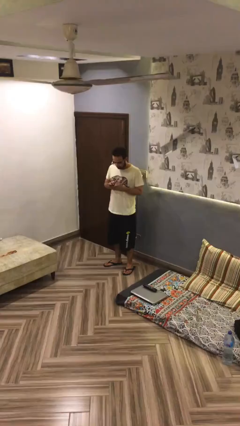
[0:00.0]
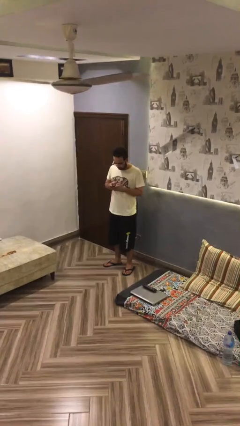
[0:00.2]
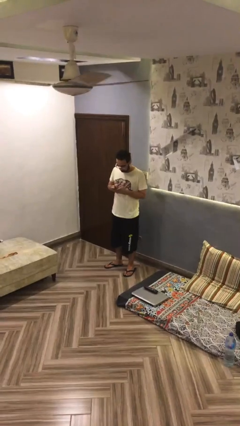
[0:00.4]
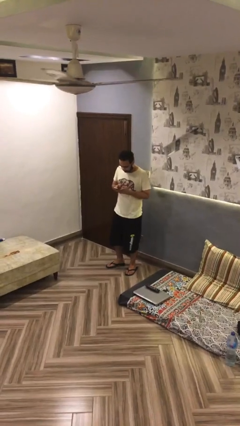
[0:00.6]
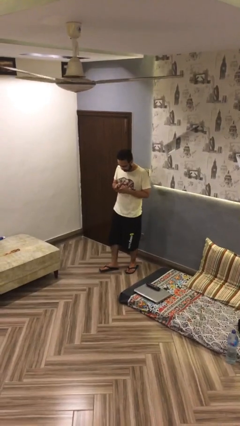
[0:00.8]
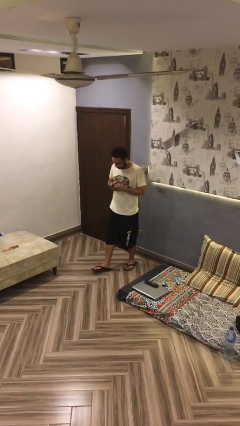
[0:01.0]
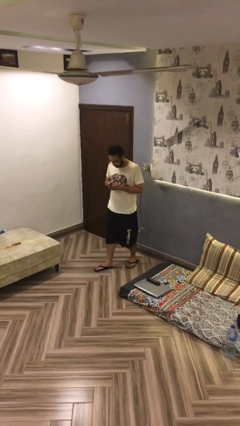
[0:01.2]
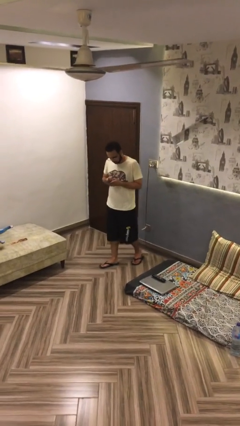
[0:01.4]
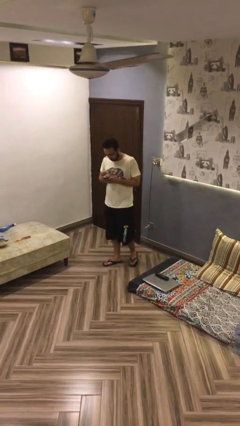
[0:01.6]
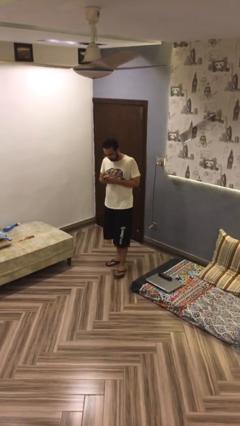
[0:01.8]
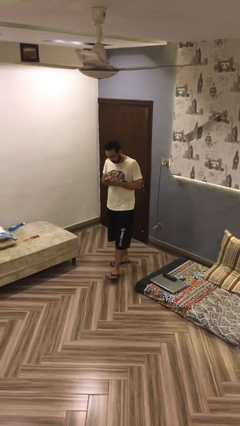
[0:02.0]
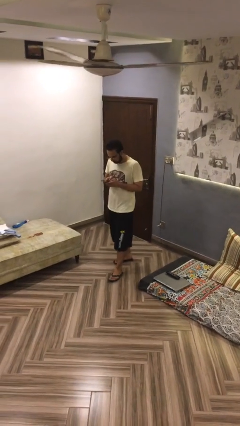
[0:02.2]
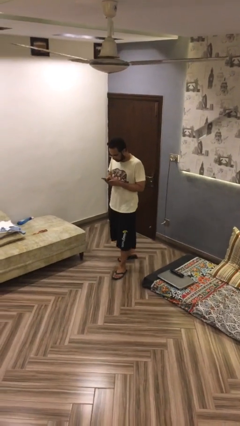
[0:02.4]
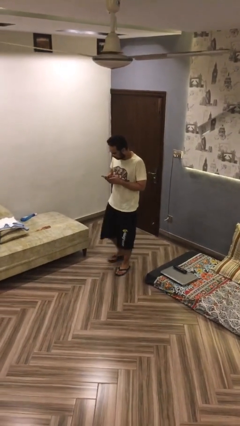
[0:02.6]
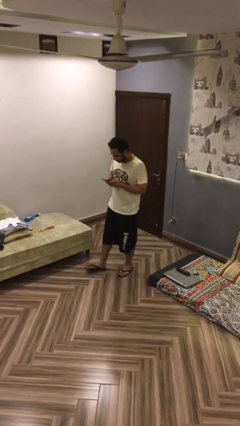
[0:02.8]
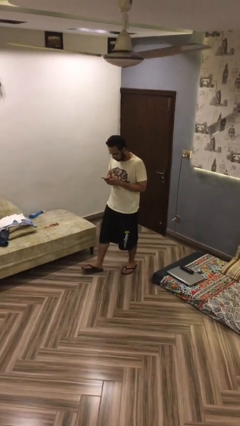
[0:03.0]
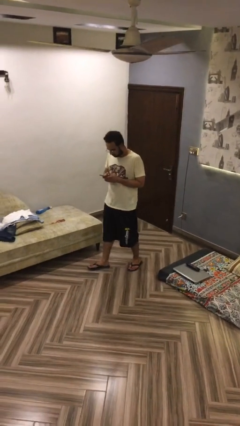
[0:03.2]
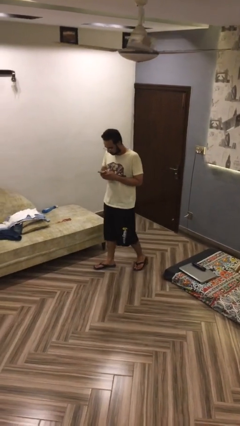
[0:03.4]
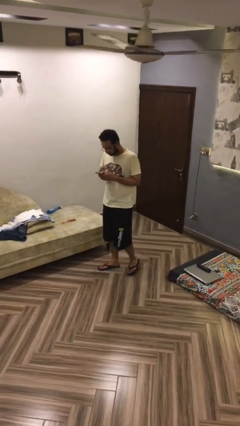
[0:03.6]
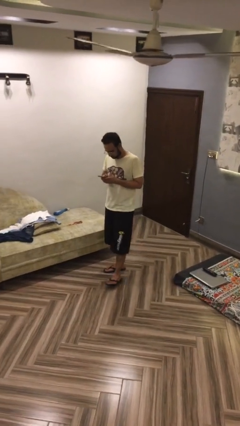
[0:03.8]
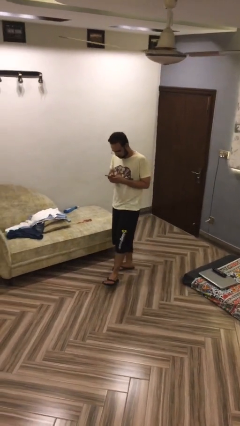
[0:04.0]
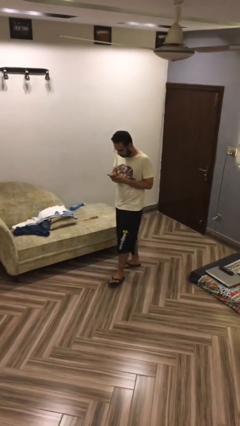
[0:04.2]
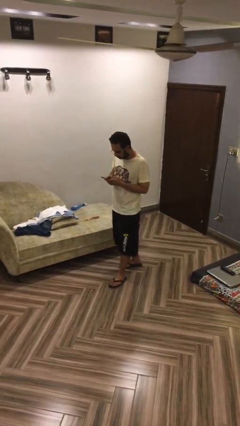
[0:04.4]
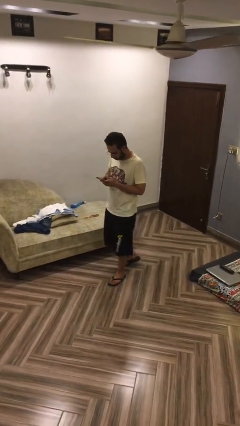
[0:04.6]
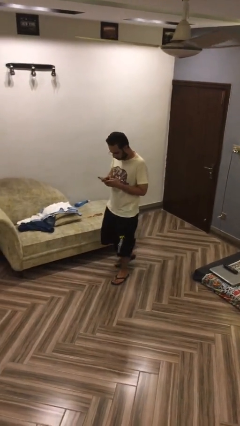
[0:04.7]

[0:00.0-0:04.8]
person texts on phone

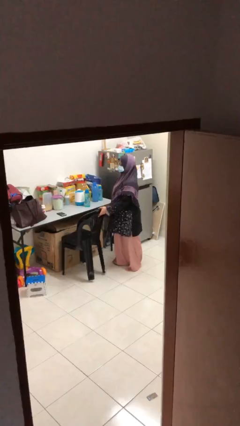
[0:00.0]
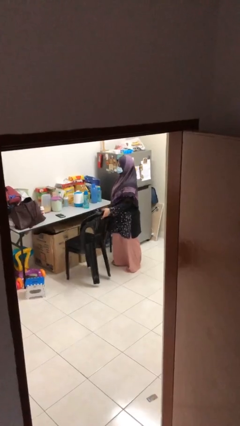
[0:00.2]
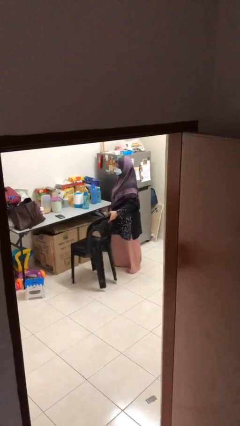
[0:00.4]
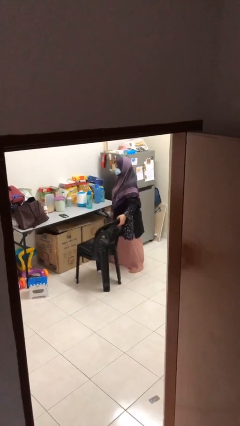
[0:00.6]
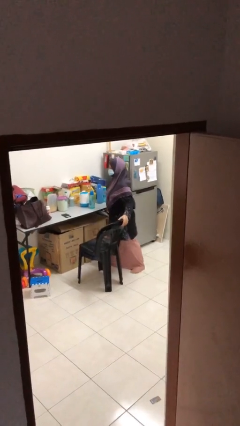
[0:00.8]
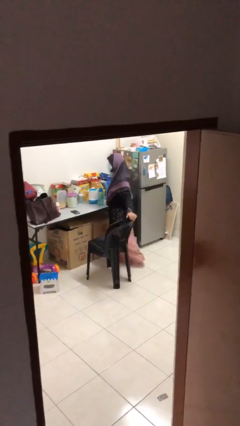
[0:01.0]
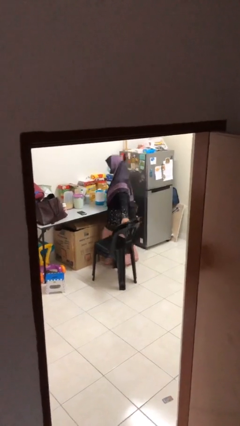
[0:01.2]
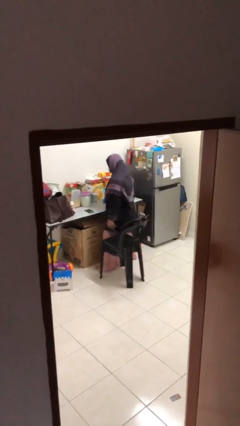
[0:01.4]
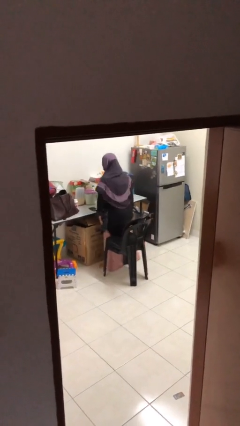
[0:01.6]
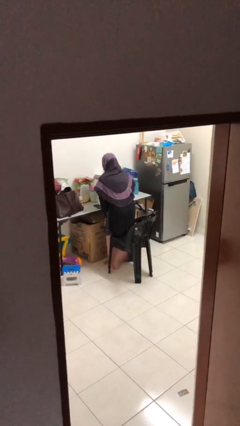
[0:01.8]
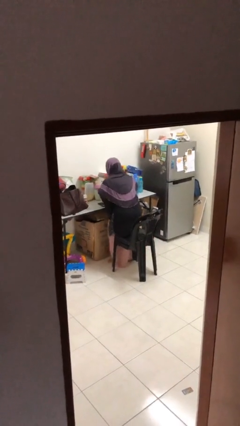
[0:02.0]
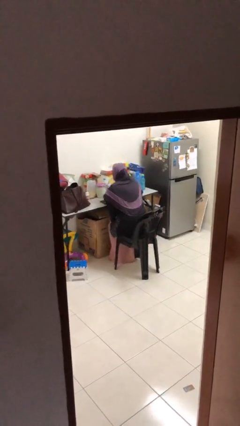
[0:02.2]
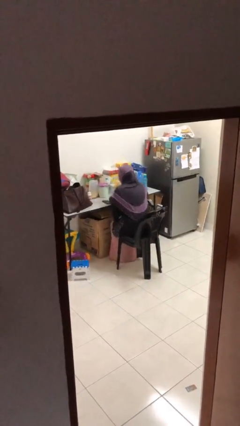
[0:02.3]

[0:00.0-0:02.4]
person sits down

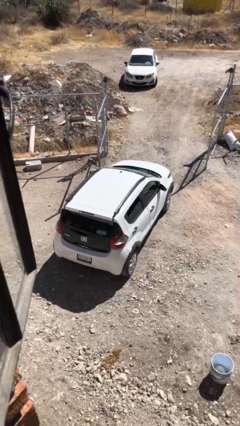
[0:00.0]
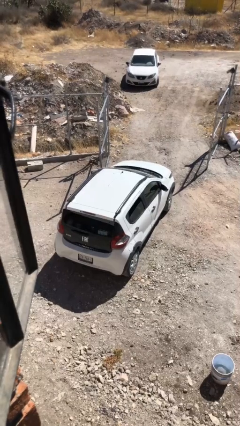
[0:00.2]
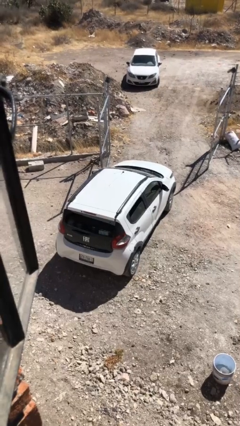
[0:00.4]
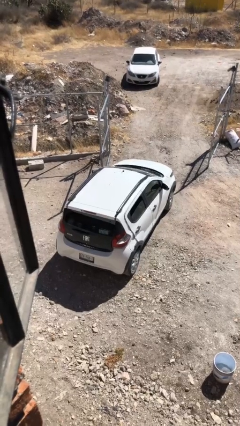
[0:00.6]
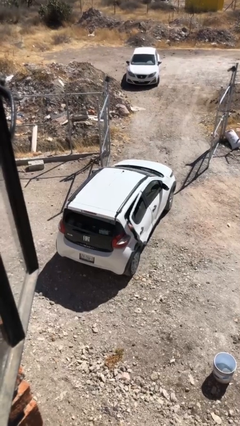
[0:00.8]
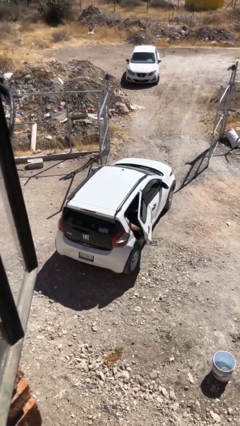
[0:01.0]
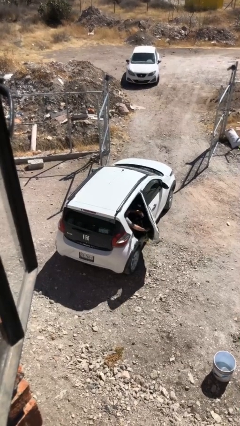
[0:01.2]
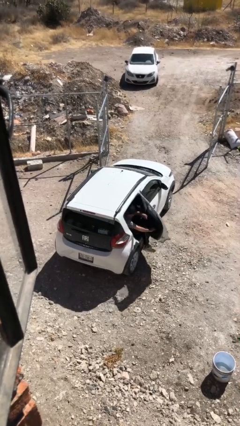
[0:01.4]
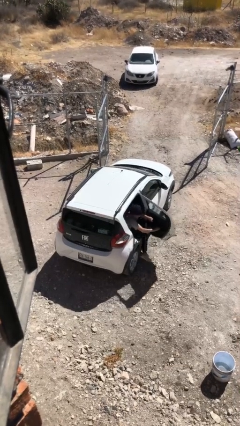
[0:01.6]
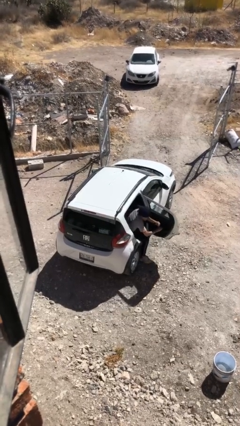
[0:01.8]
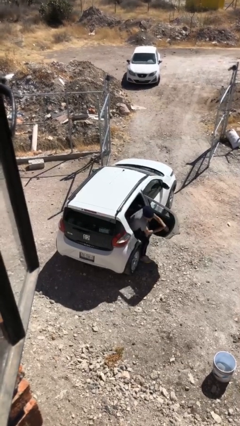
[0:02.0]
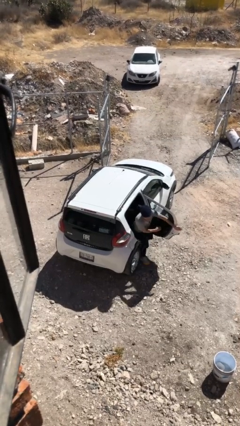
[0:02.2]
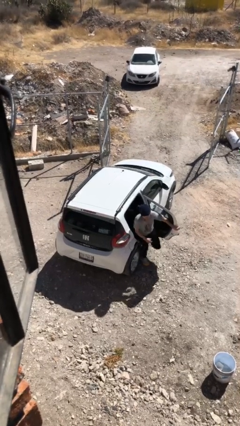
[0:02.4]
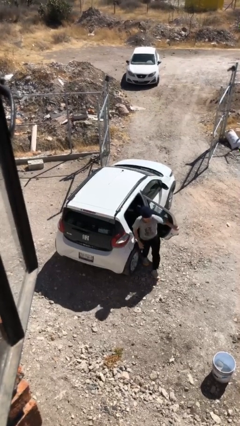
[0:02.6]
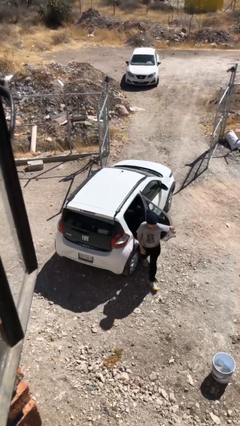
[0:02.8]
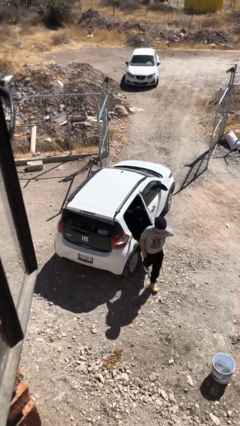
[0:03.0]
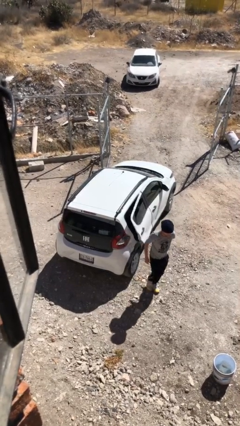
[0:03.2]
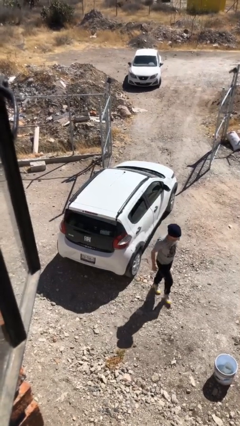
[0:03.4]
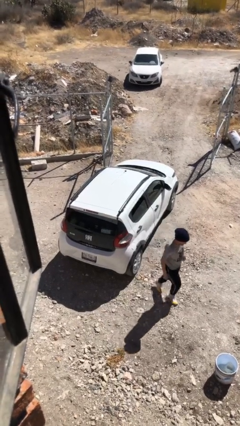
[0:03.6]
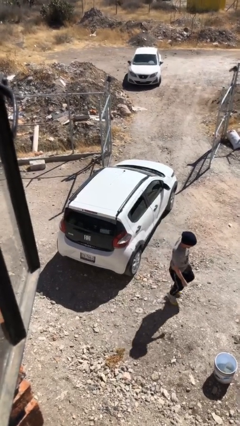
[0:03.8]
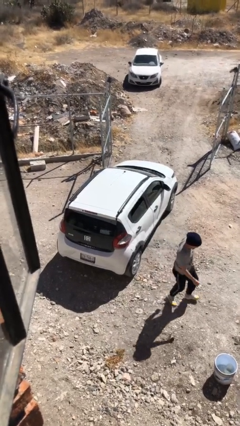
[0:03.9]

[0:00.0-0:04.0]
car drops off person

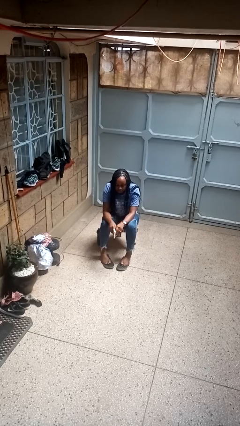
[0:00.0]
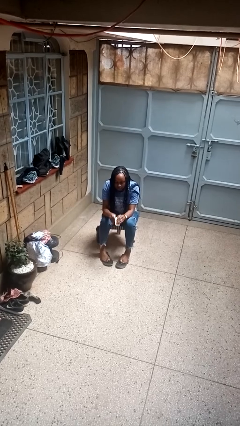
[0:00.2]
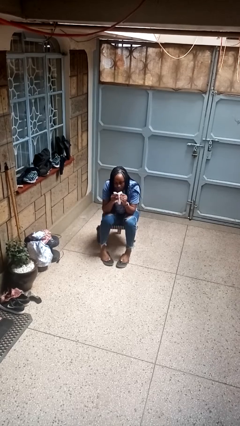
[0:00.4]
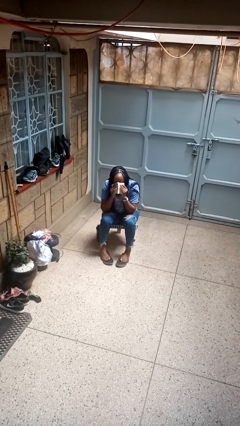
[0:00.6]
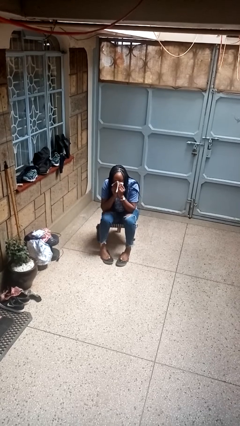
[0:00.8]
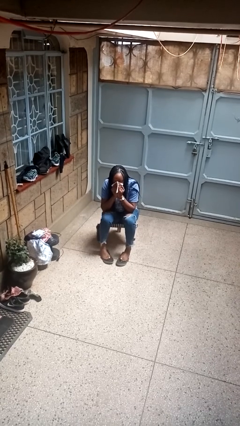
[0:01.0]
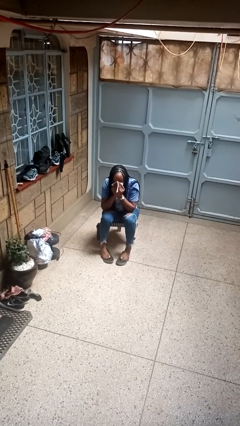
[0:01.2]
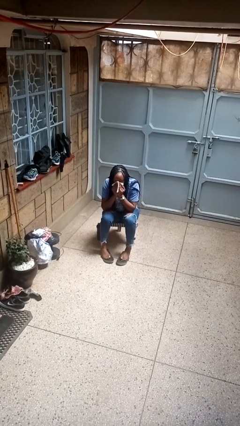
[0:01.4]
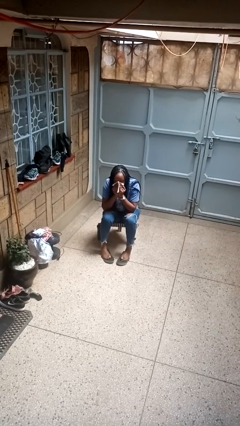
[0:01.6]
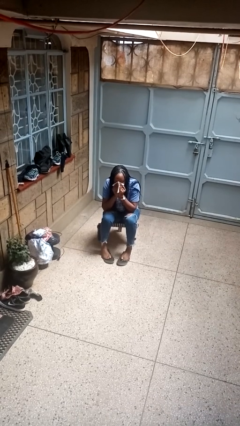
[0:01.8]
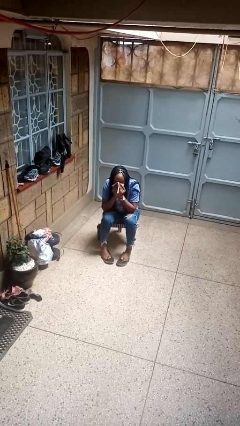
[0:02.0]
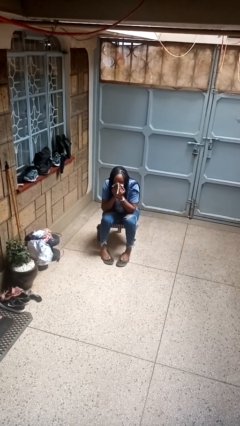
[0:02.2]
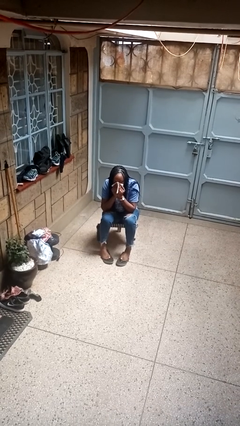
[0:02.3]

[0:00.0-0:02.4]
person blows nose

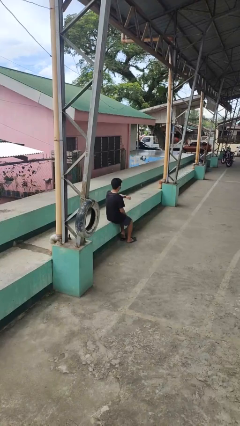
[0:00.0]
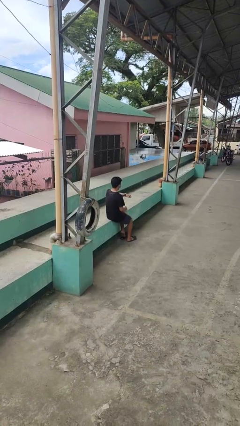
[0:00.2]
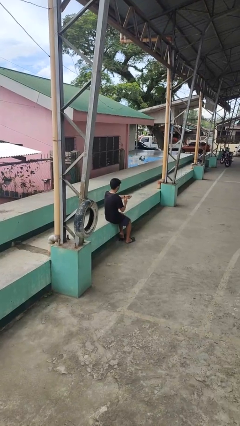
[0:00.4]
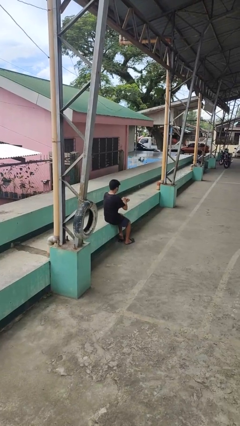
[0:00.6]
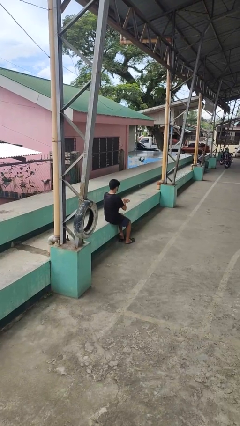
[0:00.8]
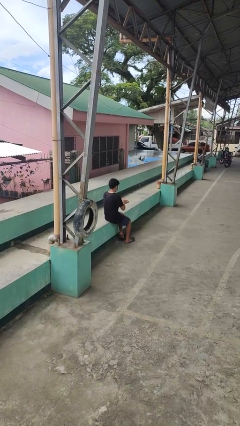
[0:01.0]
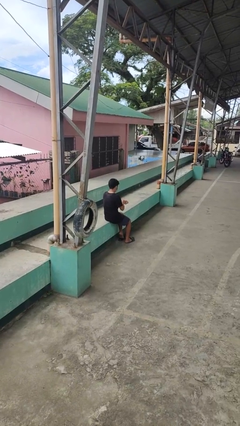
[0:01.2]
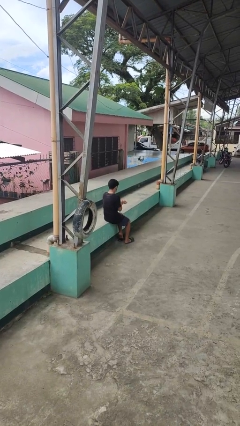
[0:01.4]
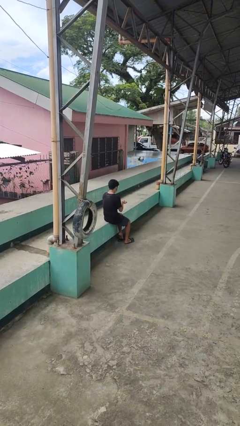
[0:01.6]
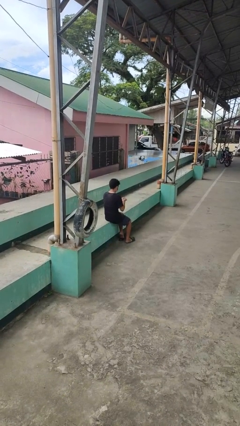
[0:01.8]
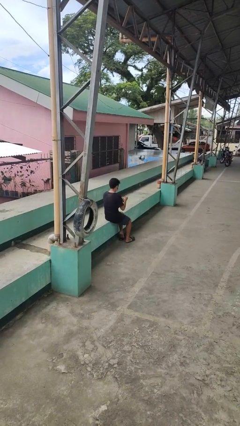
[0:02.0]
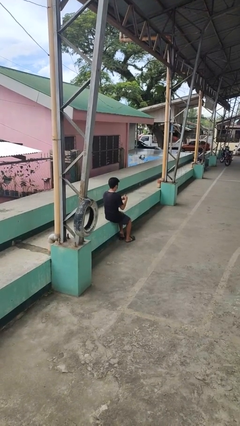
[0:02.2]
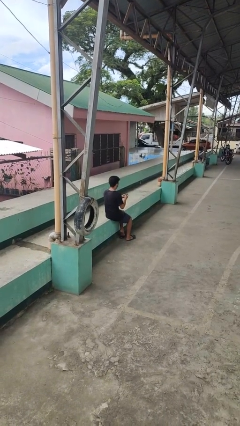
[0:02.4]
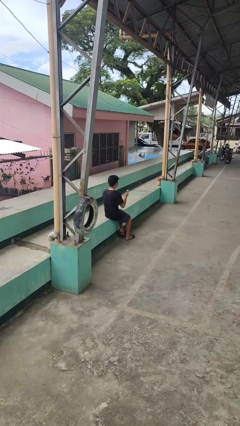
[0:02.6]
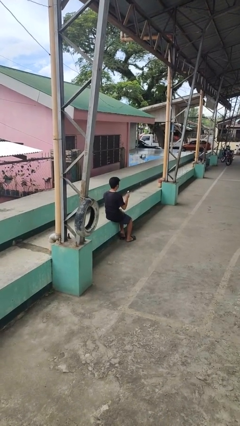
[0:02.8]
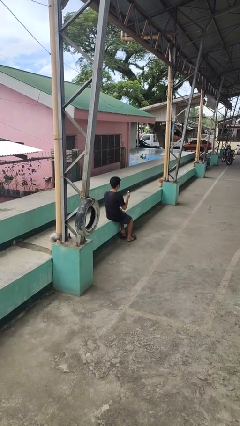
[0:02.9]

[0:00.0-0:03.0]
person takes off wristwatch

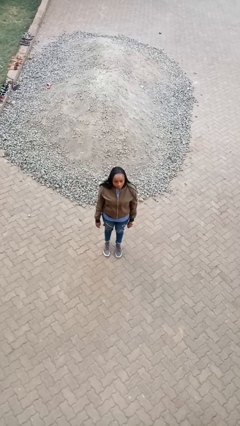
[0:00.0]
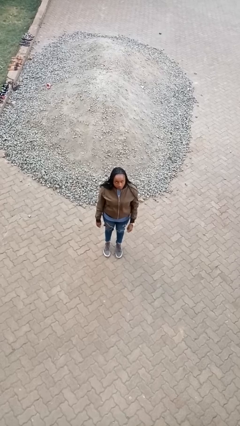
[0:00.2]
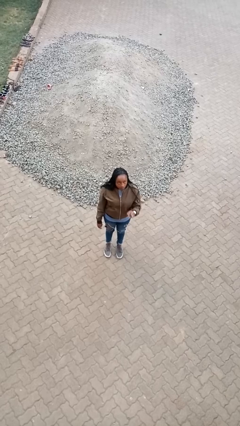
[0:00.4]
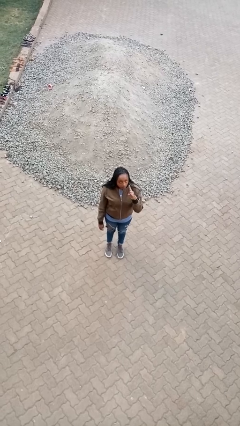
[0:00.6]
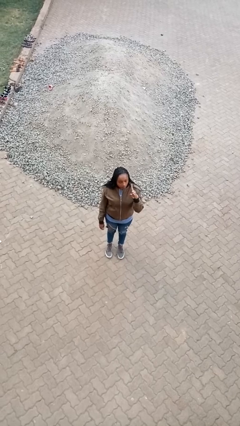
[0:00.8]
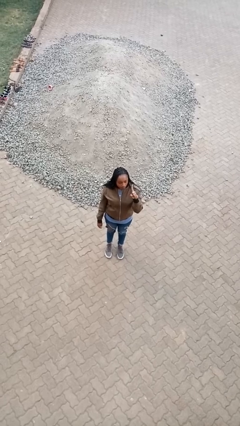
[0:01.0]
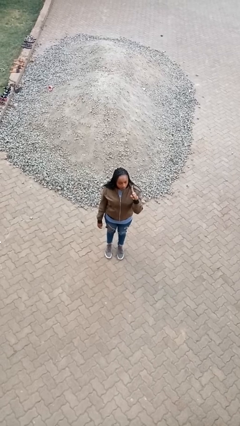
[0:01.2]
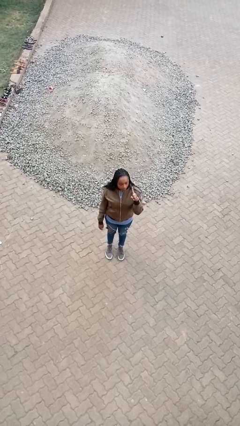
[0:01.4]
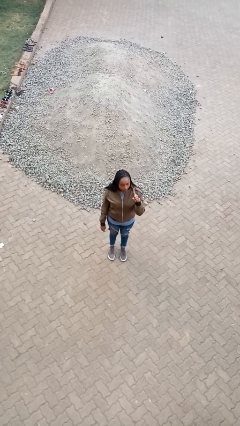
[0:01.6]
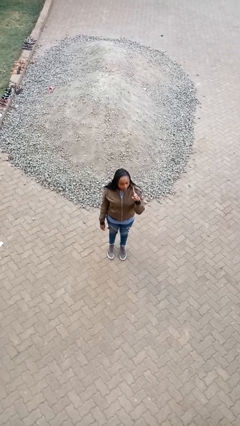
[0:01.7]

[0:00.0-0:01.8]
person gestures number one
